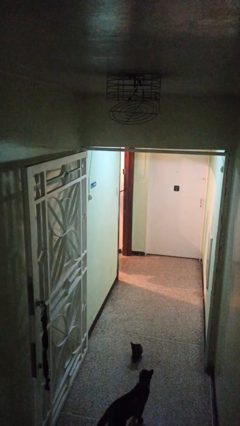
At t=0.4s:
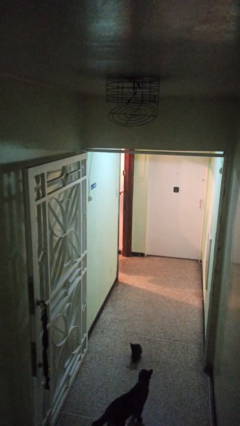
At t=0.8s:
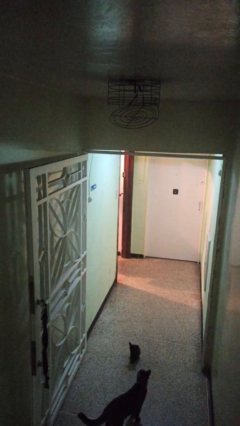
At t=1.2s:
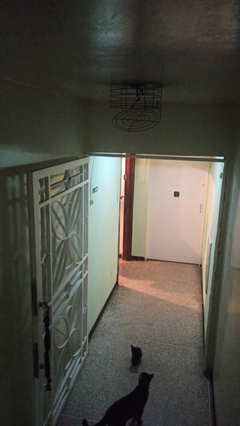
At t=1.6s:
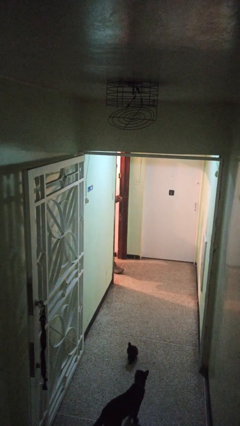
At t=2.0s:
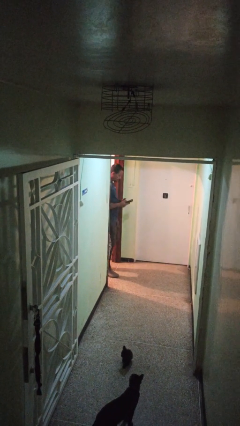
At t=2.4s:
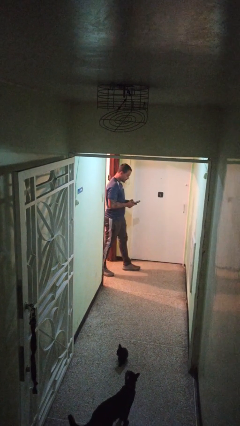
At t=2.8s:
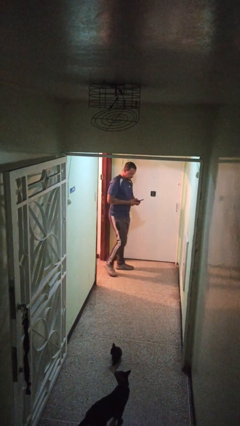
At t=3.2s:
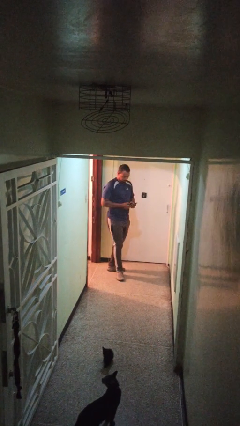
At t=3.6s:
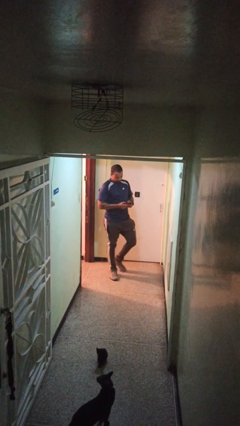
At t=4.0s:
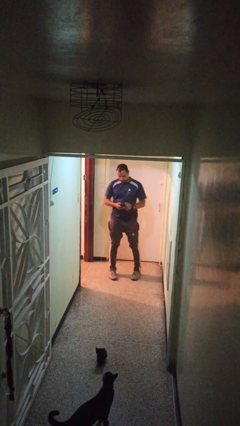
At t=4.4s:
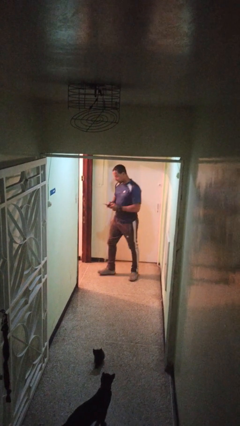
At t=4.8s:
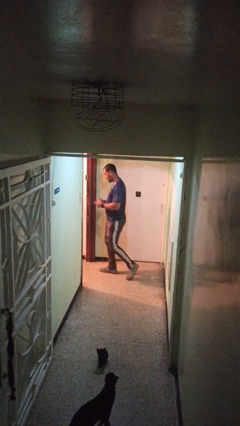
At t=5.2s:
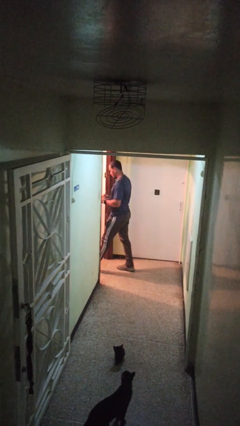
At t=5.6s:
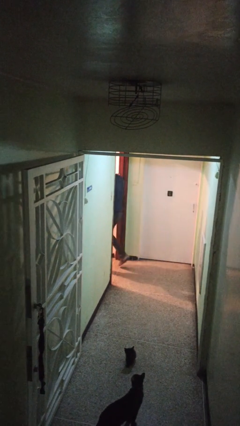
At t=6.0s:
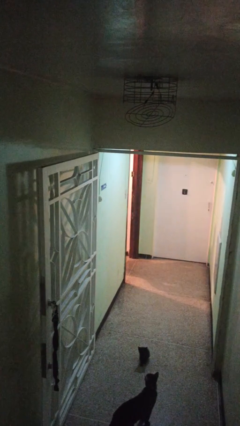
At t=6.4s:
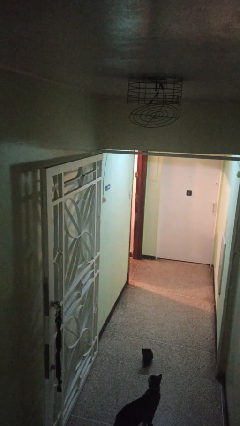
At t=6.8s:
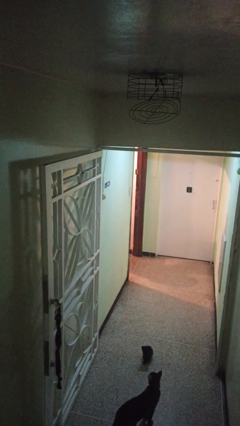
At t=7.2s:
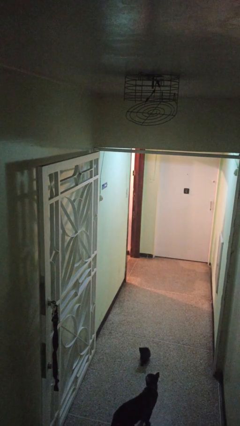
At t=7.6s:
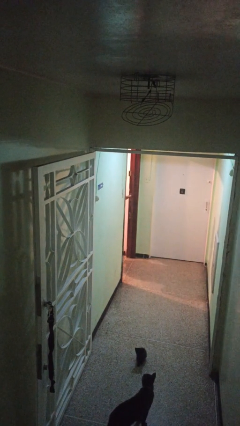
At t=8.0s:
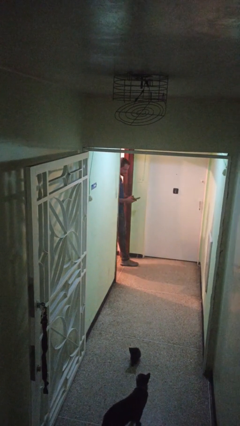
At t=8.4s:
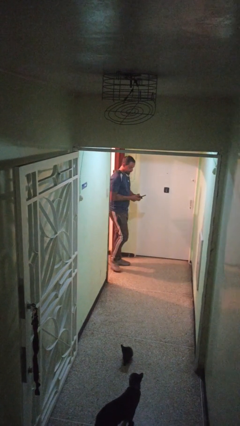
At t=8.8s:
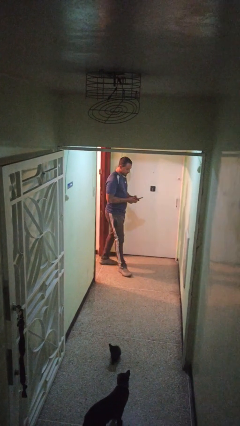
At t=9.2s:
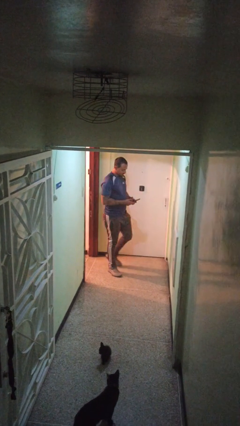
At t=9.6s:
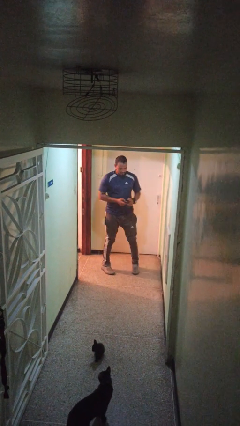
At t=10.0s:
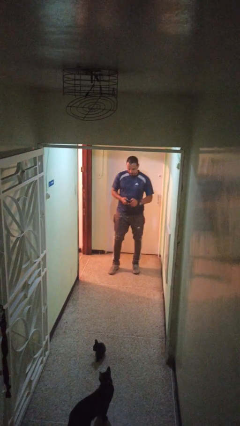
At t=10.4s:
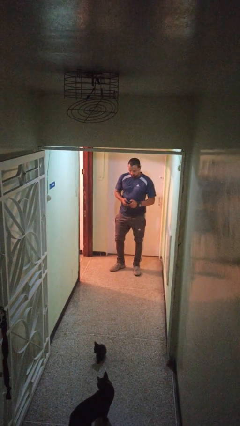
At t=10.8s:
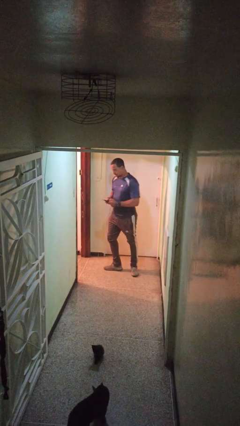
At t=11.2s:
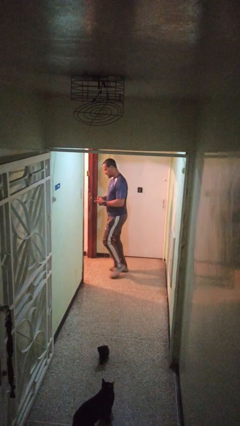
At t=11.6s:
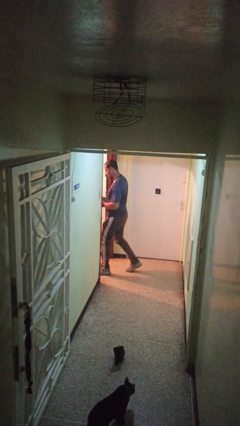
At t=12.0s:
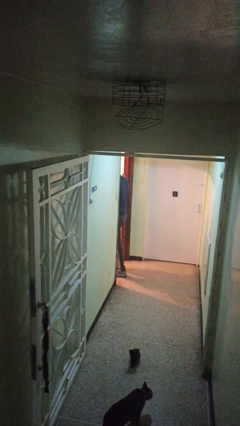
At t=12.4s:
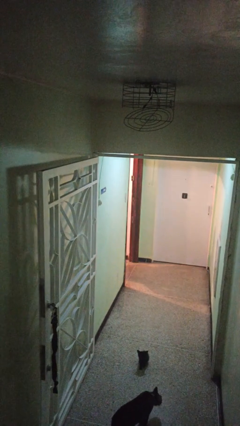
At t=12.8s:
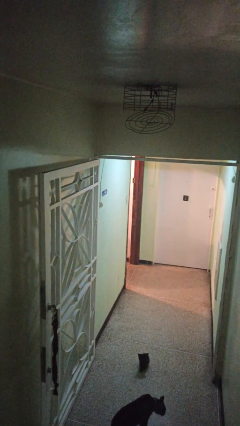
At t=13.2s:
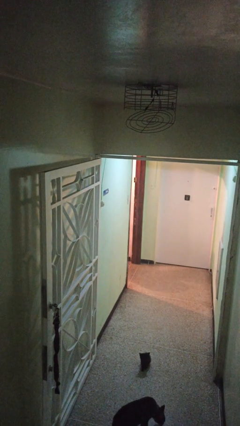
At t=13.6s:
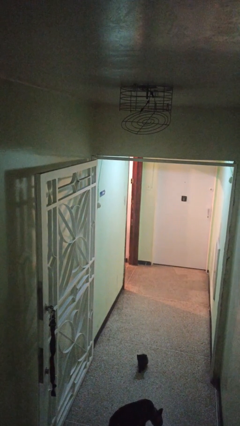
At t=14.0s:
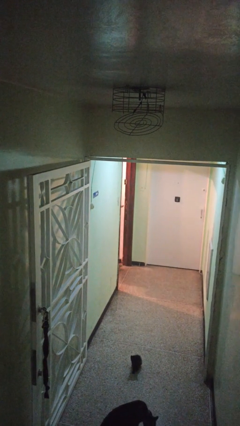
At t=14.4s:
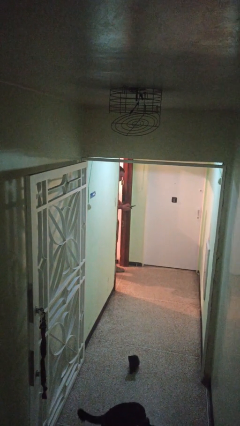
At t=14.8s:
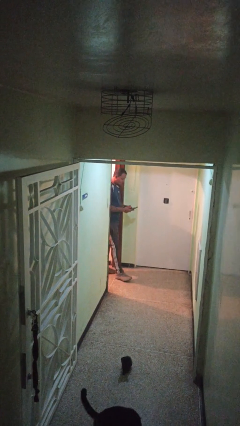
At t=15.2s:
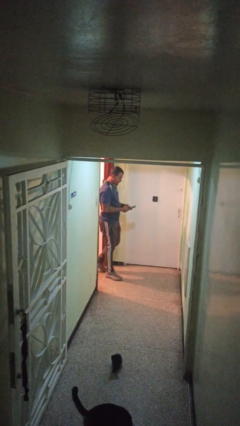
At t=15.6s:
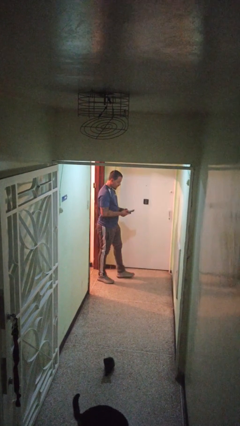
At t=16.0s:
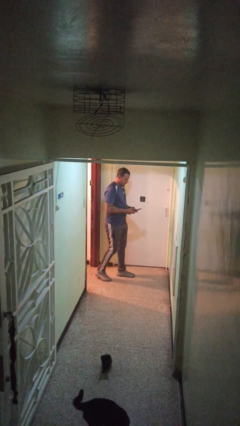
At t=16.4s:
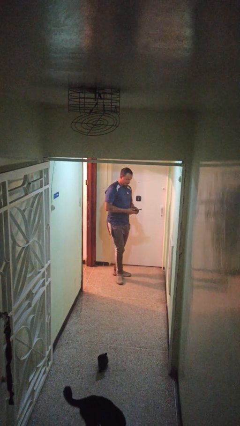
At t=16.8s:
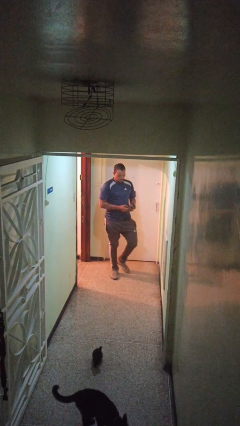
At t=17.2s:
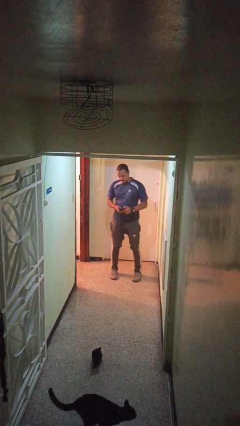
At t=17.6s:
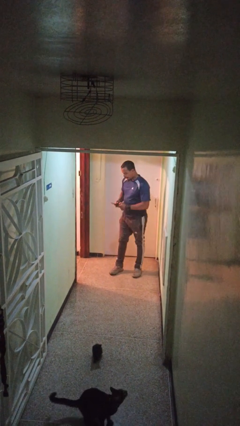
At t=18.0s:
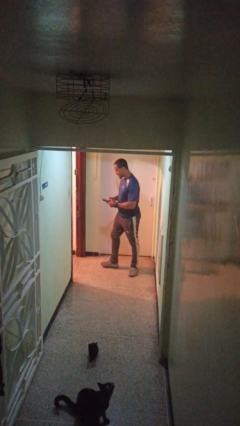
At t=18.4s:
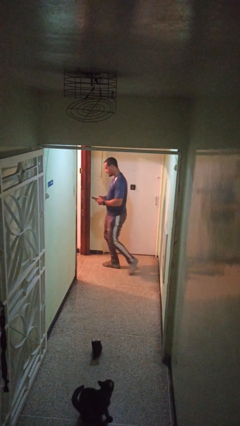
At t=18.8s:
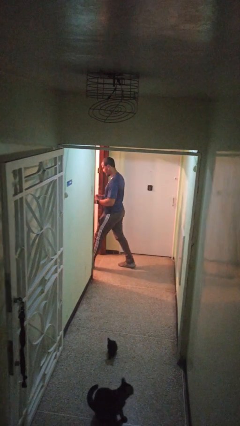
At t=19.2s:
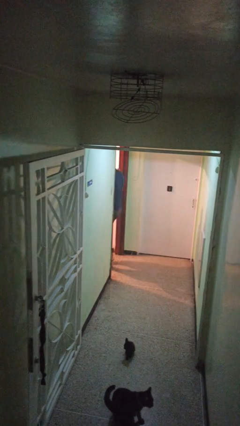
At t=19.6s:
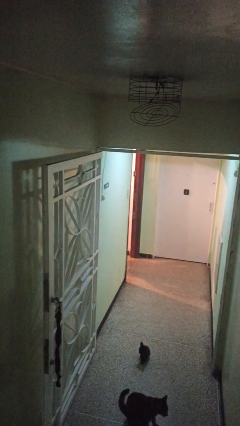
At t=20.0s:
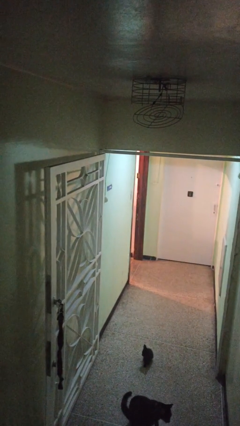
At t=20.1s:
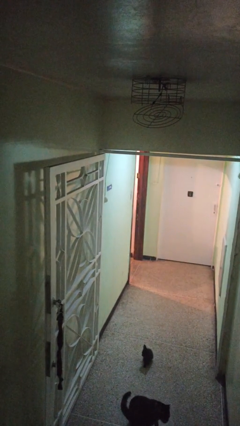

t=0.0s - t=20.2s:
person texts on phone

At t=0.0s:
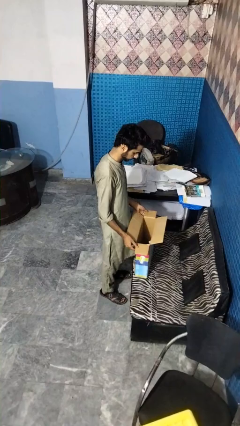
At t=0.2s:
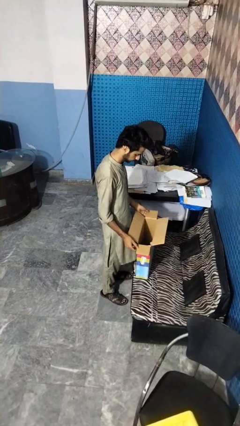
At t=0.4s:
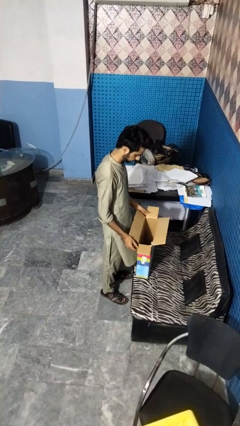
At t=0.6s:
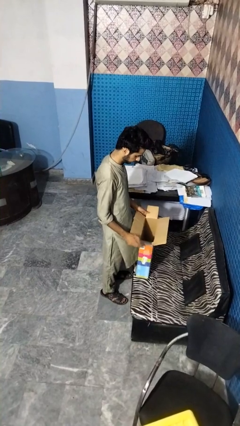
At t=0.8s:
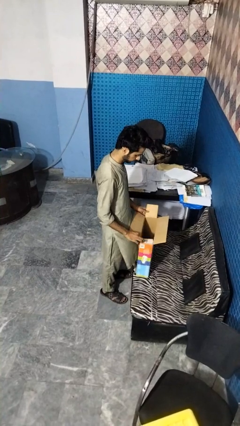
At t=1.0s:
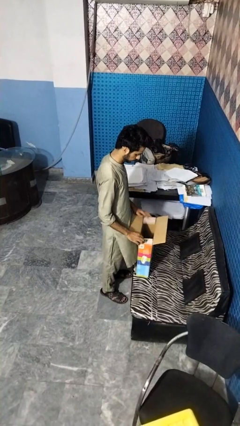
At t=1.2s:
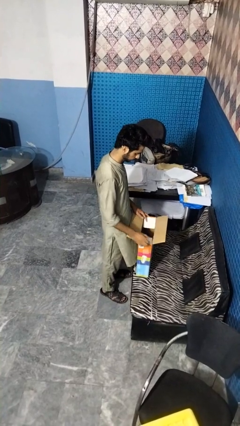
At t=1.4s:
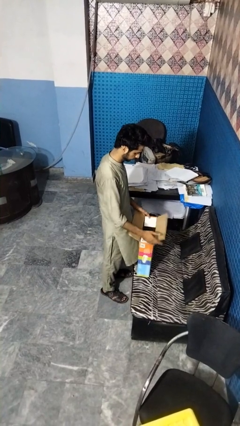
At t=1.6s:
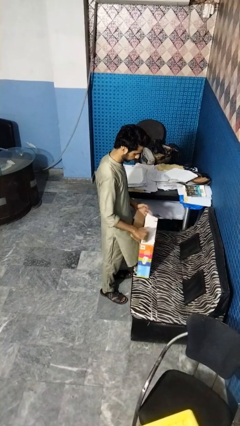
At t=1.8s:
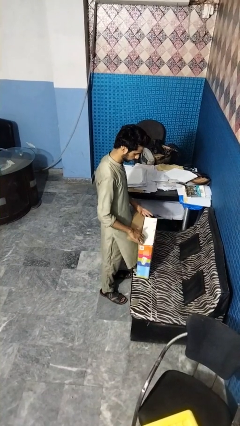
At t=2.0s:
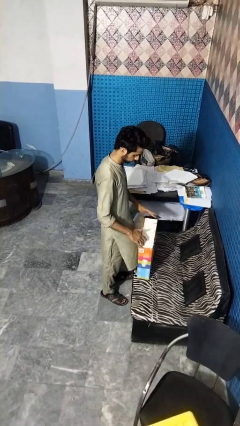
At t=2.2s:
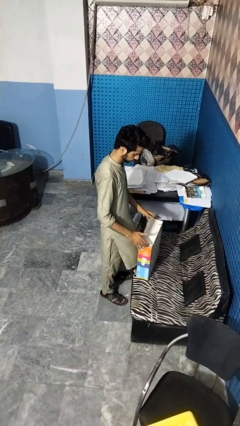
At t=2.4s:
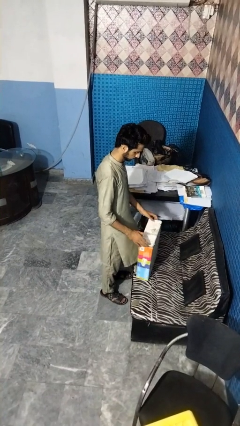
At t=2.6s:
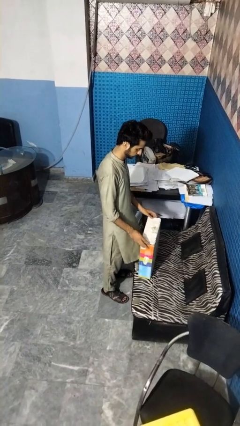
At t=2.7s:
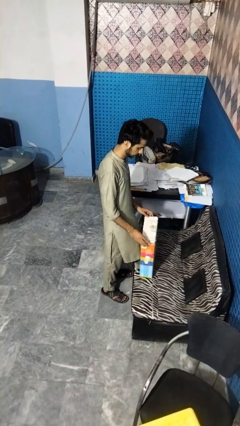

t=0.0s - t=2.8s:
person closes box

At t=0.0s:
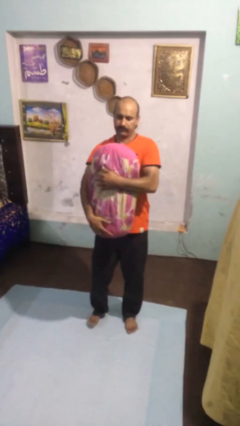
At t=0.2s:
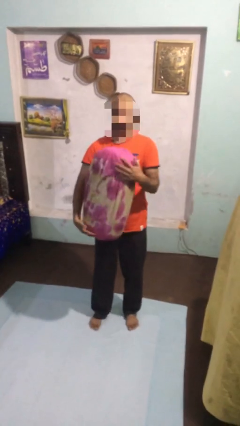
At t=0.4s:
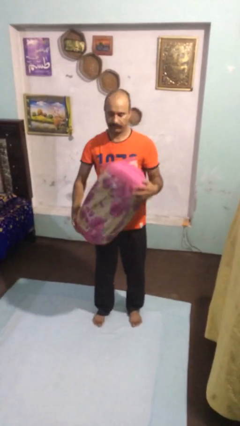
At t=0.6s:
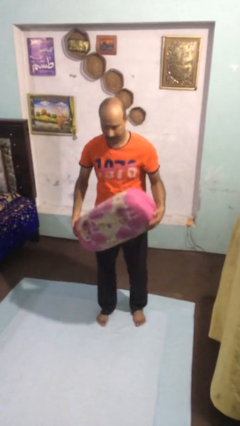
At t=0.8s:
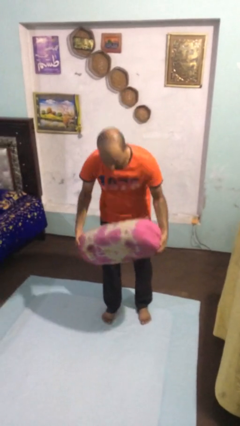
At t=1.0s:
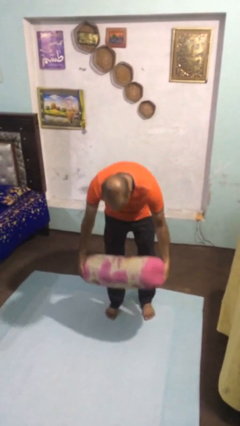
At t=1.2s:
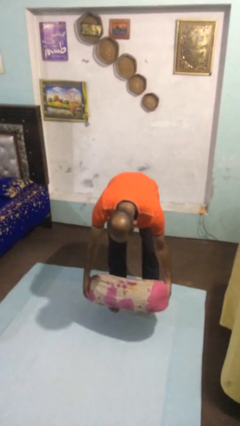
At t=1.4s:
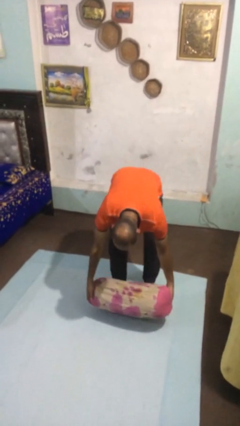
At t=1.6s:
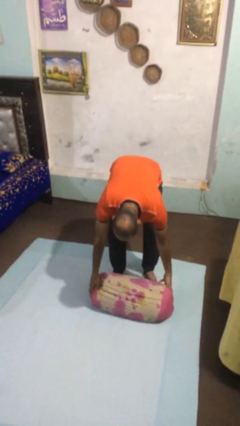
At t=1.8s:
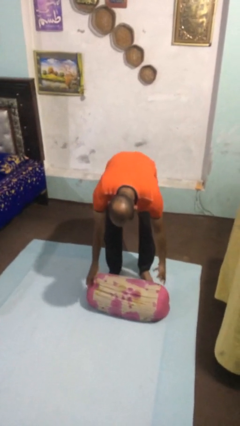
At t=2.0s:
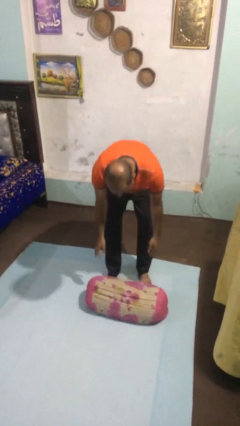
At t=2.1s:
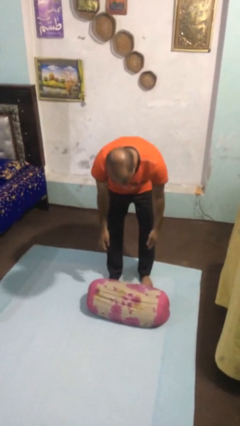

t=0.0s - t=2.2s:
person puts down object on floor

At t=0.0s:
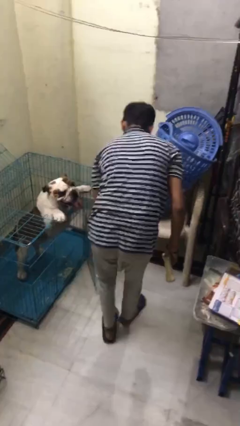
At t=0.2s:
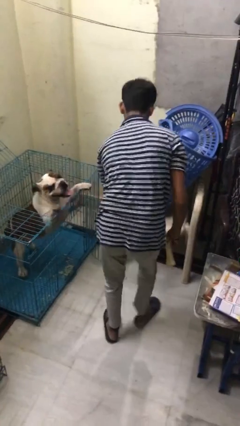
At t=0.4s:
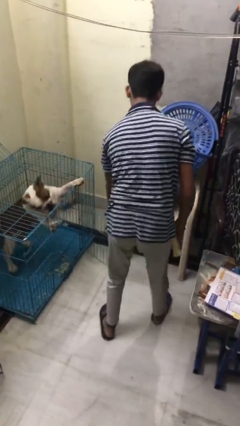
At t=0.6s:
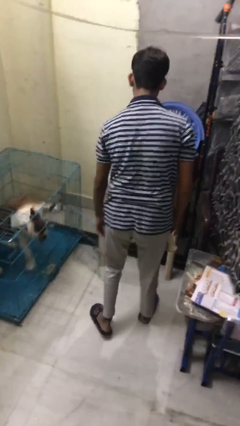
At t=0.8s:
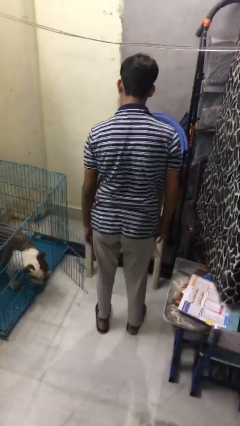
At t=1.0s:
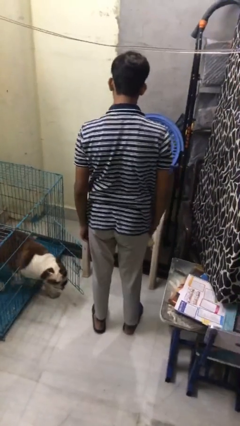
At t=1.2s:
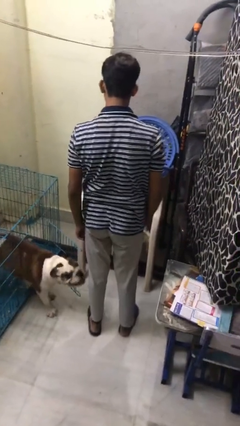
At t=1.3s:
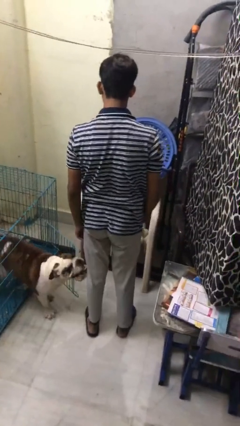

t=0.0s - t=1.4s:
person uncrates dog

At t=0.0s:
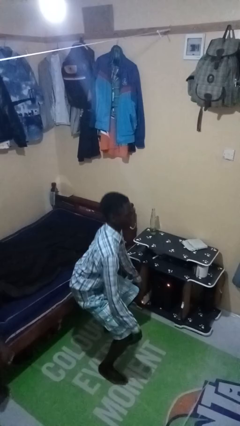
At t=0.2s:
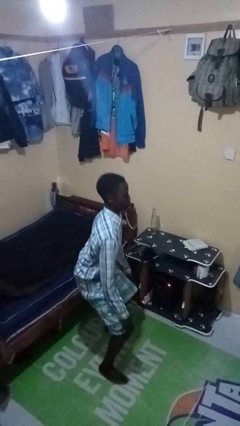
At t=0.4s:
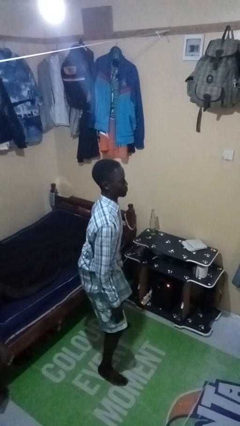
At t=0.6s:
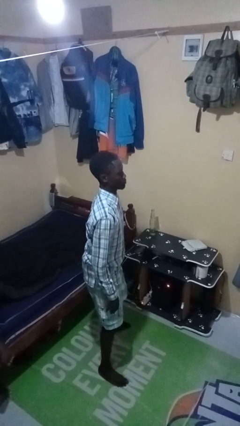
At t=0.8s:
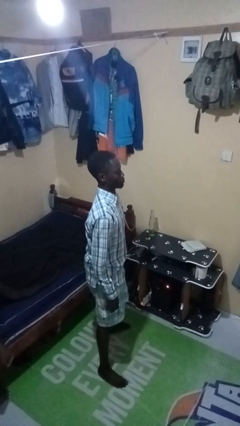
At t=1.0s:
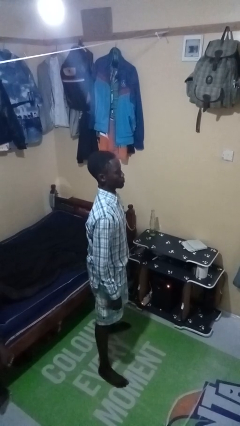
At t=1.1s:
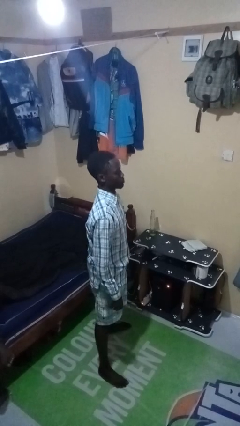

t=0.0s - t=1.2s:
person stands up
